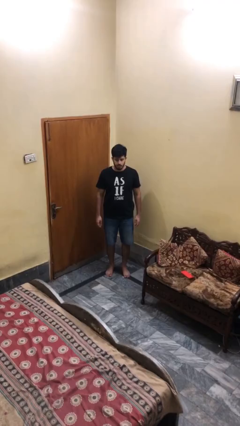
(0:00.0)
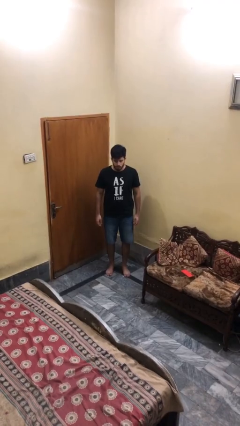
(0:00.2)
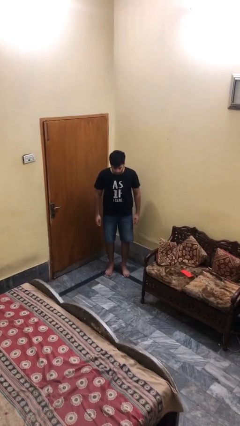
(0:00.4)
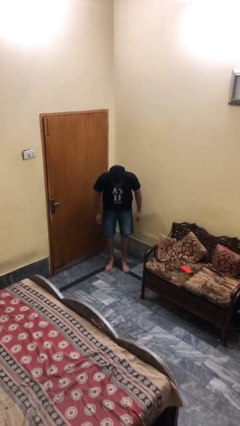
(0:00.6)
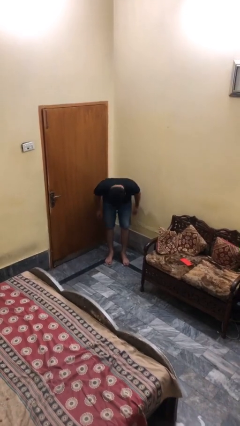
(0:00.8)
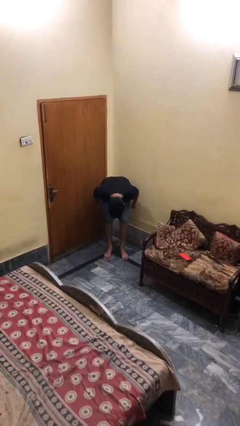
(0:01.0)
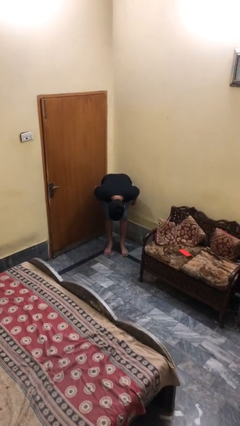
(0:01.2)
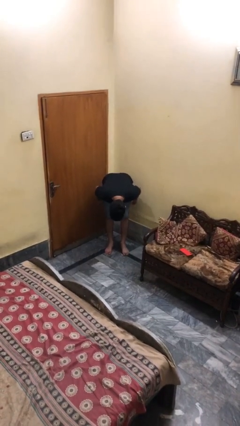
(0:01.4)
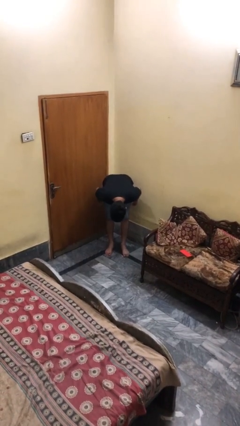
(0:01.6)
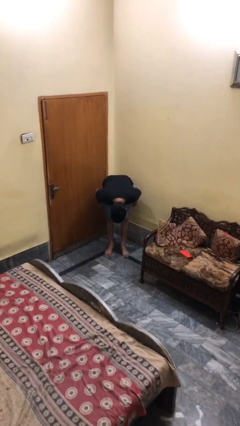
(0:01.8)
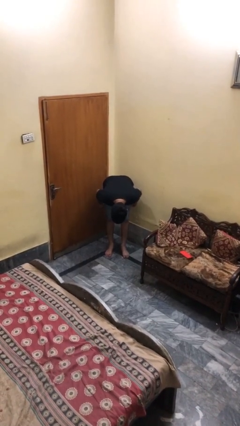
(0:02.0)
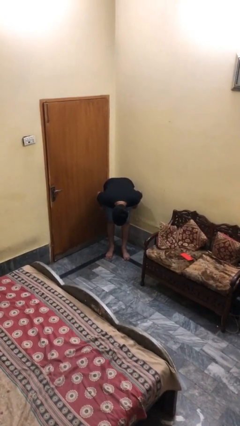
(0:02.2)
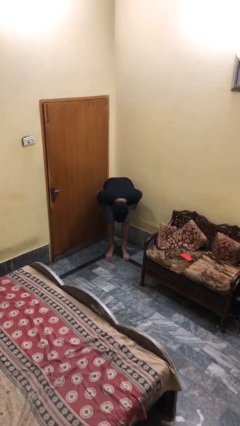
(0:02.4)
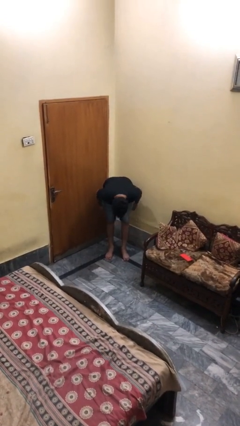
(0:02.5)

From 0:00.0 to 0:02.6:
person bows

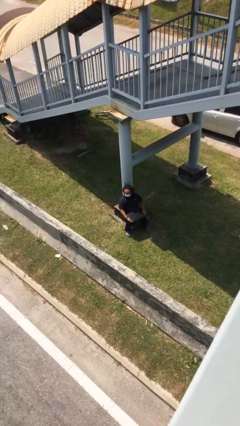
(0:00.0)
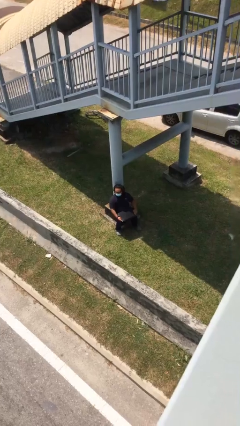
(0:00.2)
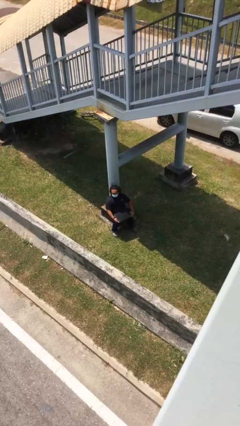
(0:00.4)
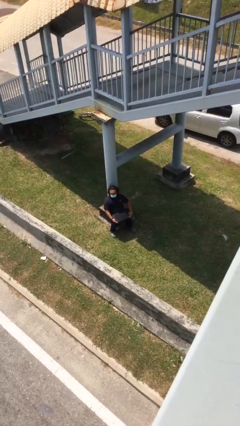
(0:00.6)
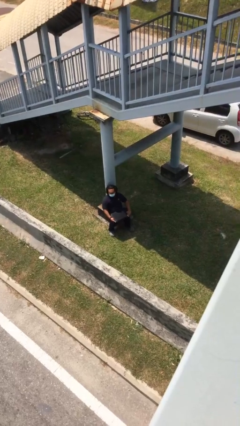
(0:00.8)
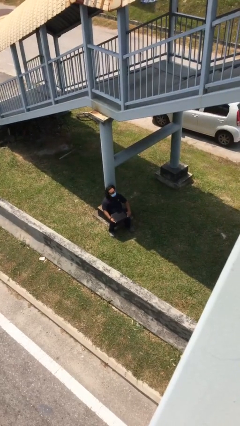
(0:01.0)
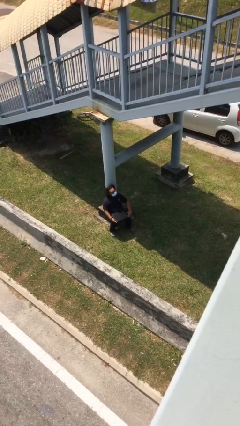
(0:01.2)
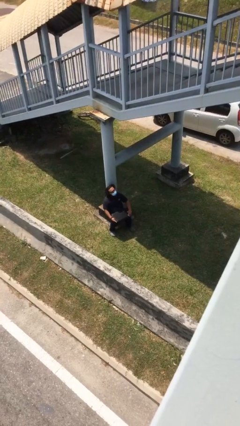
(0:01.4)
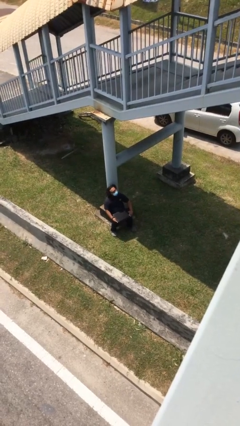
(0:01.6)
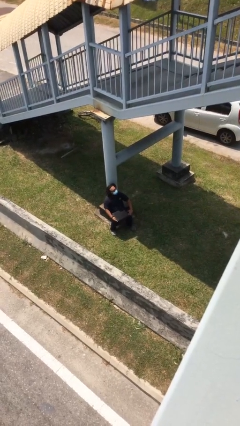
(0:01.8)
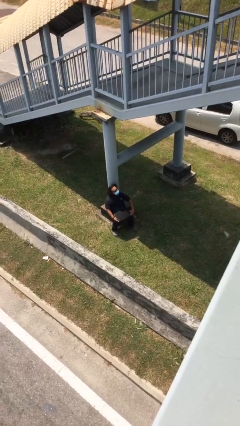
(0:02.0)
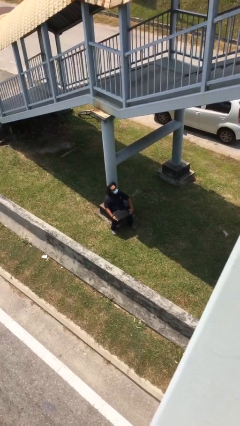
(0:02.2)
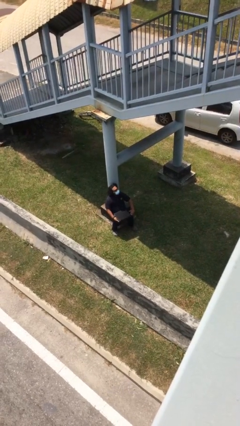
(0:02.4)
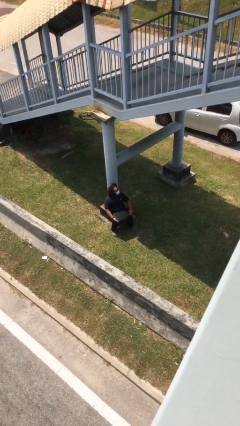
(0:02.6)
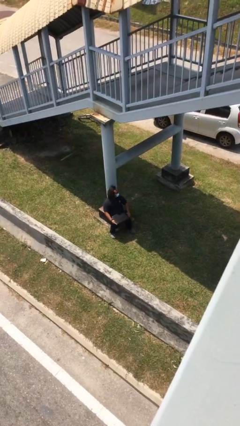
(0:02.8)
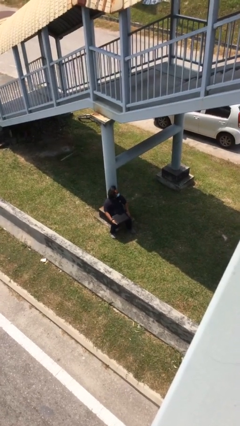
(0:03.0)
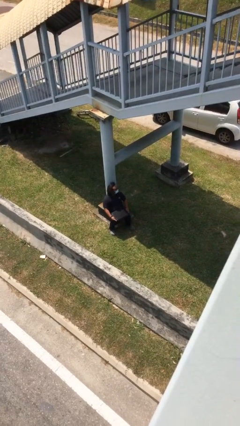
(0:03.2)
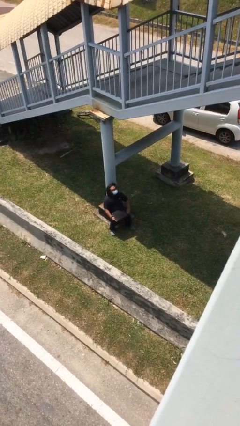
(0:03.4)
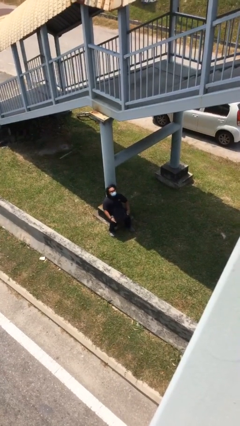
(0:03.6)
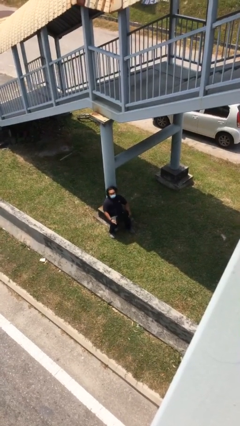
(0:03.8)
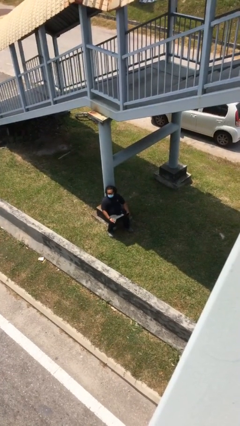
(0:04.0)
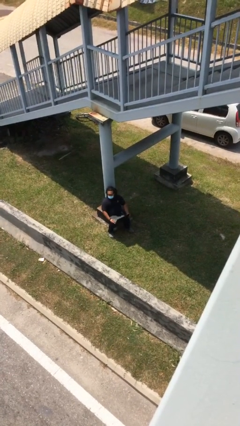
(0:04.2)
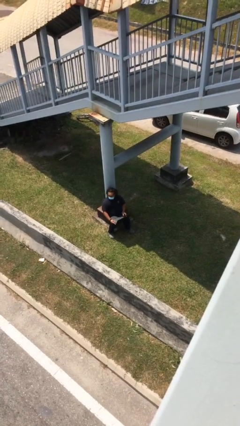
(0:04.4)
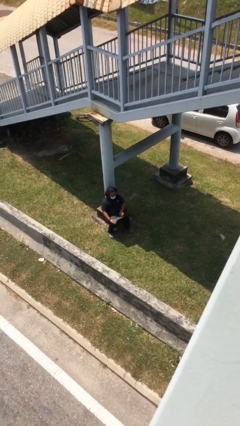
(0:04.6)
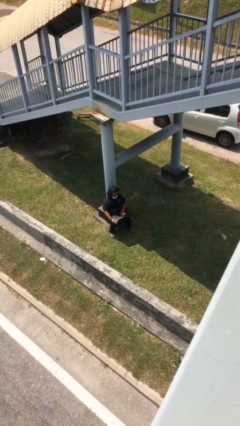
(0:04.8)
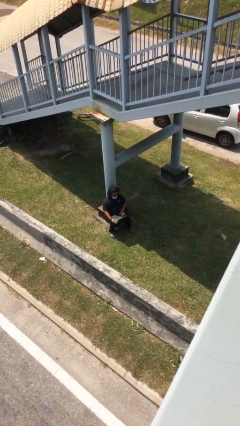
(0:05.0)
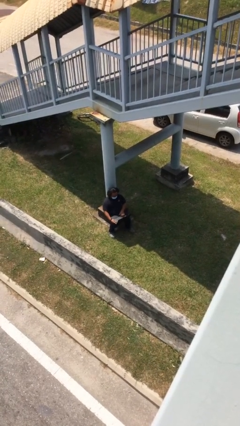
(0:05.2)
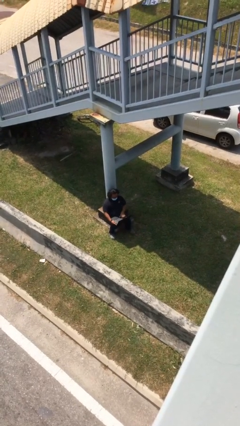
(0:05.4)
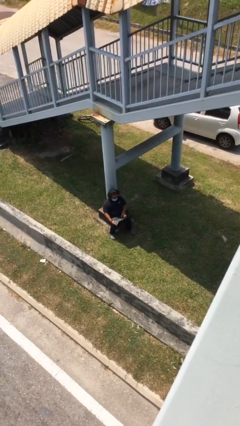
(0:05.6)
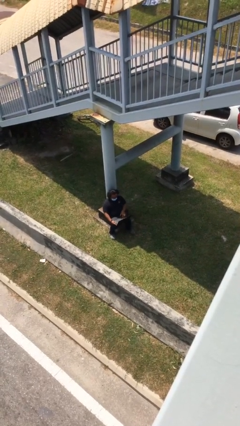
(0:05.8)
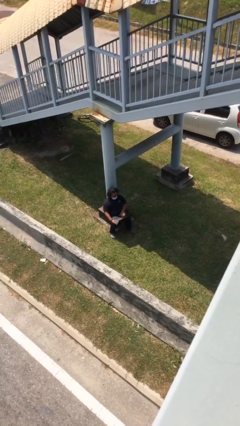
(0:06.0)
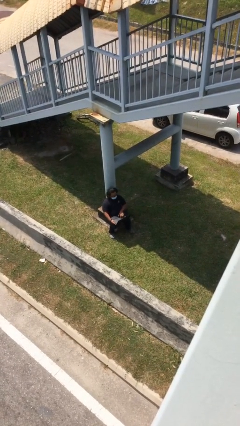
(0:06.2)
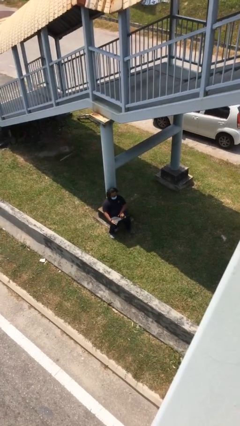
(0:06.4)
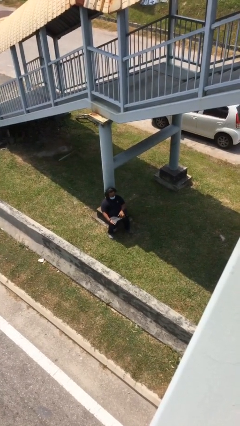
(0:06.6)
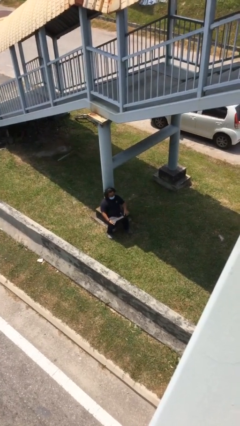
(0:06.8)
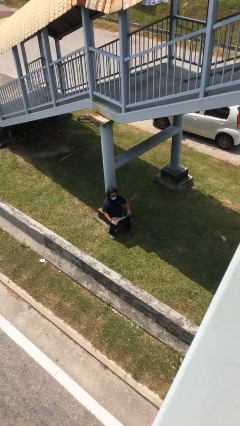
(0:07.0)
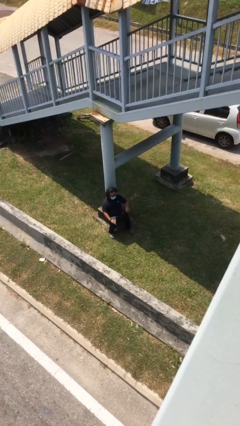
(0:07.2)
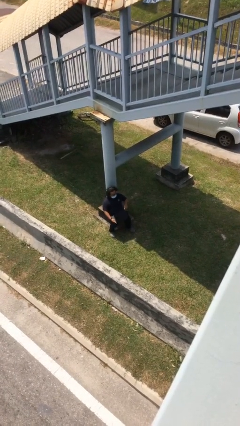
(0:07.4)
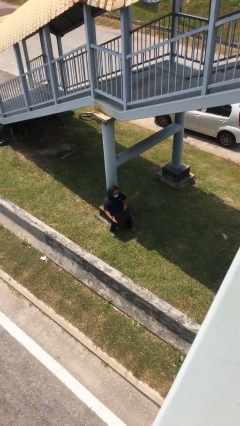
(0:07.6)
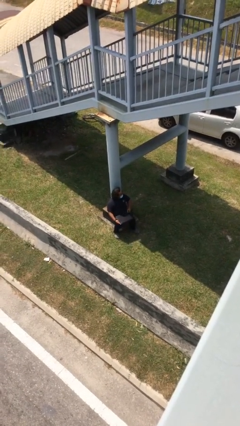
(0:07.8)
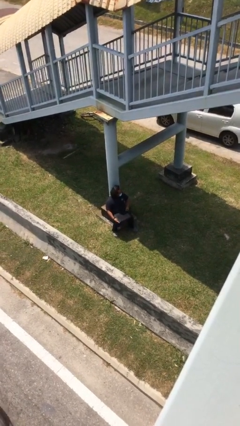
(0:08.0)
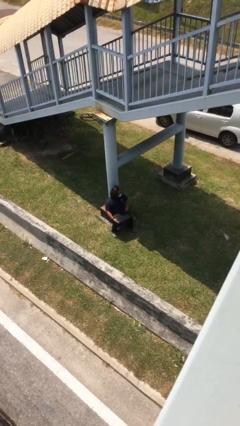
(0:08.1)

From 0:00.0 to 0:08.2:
person interacts with laptop

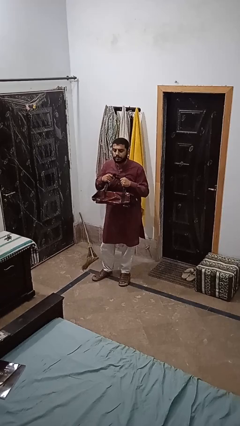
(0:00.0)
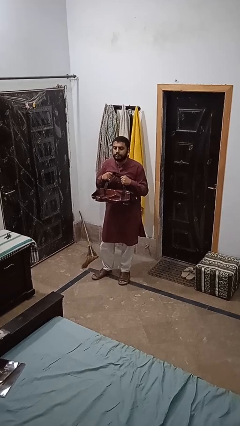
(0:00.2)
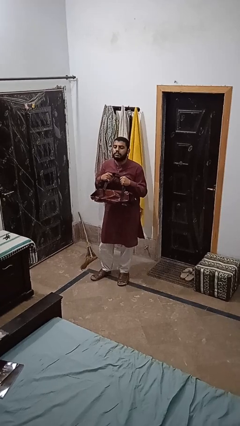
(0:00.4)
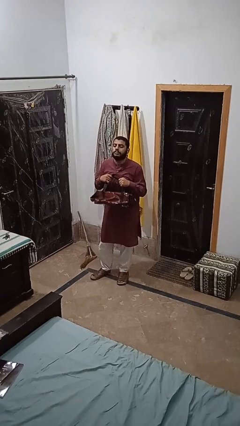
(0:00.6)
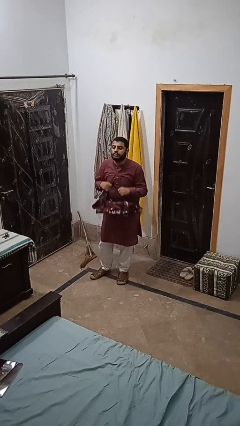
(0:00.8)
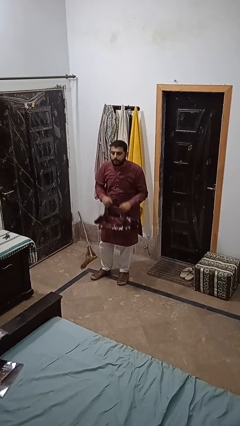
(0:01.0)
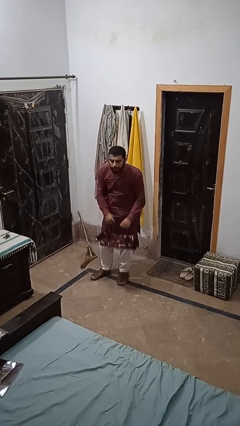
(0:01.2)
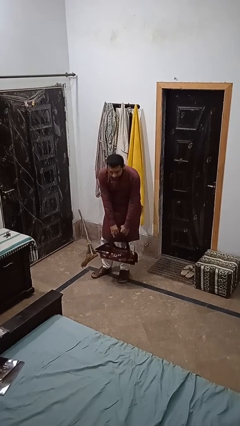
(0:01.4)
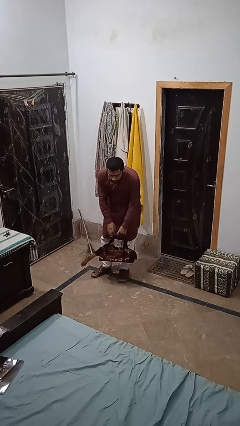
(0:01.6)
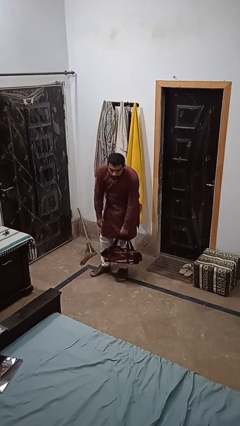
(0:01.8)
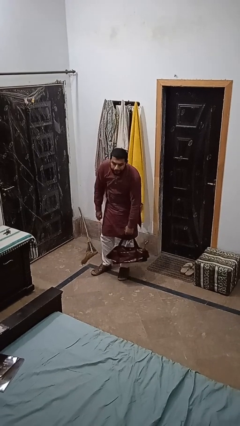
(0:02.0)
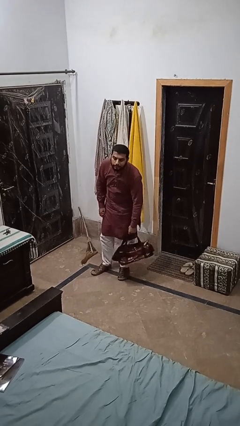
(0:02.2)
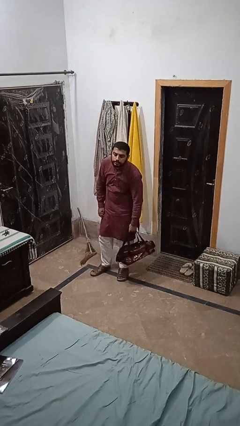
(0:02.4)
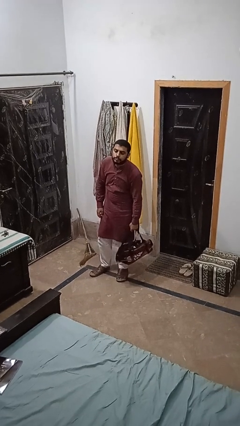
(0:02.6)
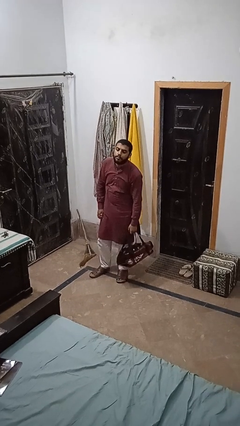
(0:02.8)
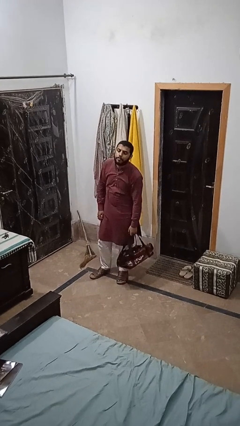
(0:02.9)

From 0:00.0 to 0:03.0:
person takes off backpack

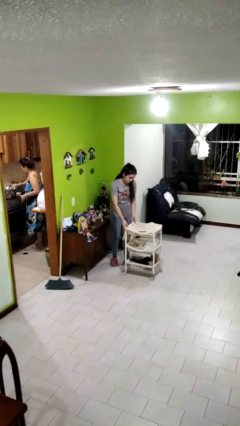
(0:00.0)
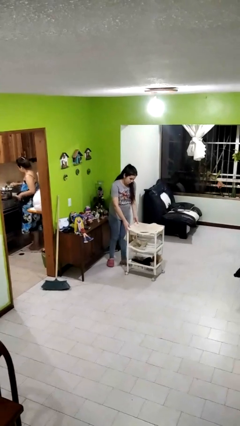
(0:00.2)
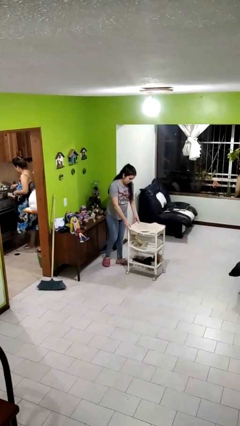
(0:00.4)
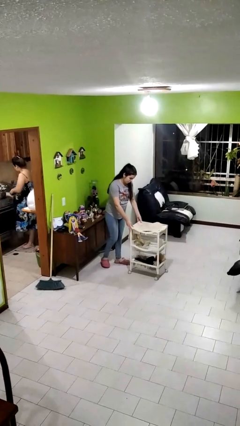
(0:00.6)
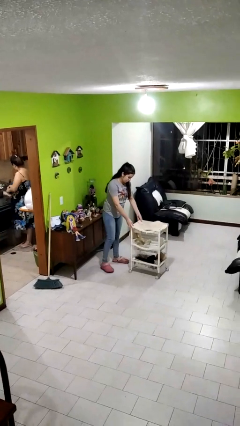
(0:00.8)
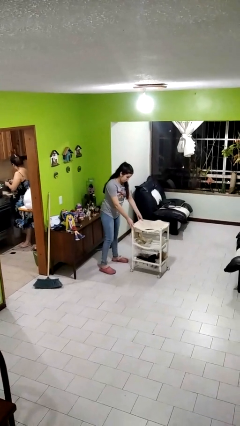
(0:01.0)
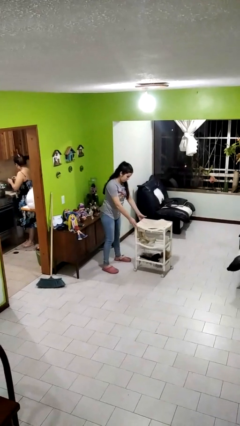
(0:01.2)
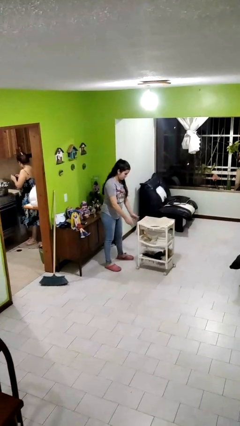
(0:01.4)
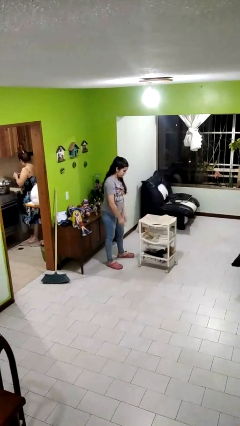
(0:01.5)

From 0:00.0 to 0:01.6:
person pushes wheeled cart

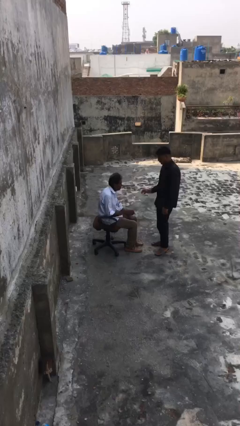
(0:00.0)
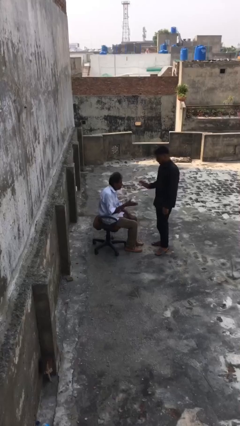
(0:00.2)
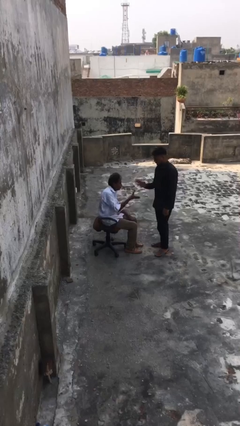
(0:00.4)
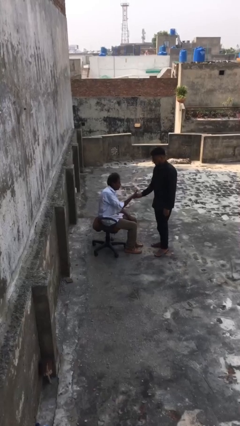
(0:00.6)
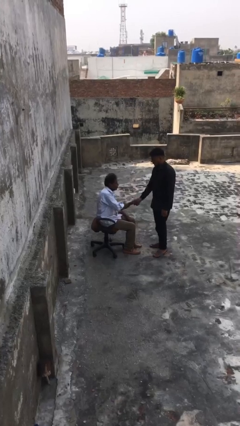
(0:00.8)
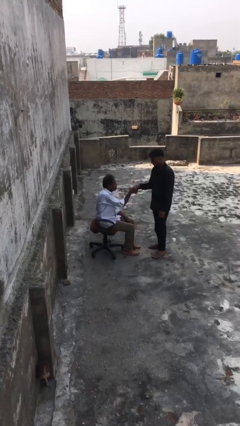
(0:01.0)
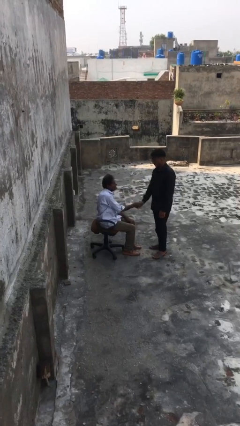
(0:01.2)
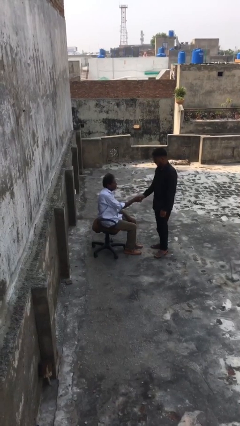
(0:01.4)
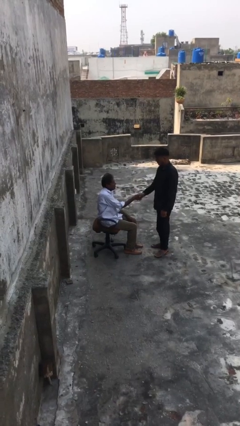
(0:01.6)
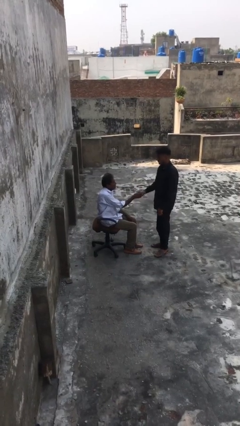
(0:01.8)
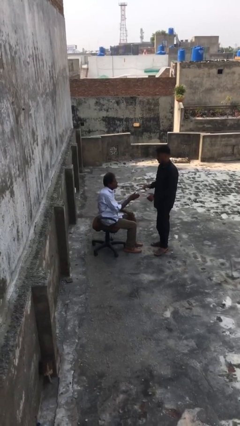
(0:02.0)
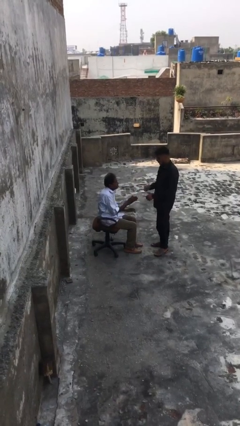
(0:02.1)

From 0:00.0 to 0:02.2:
person shakes hand
